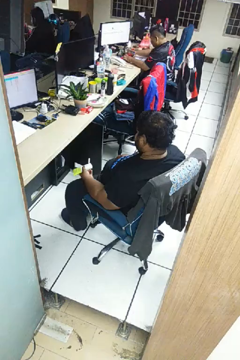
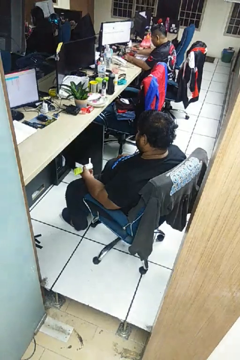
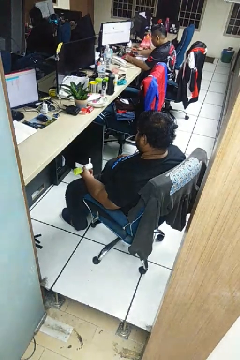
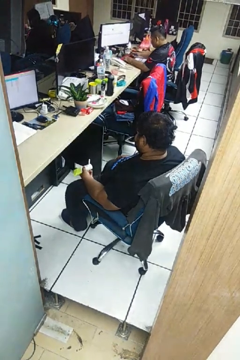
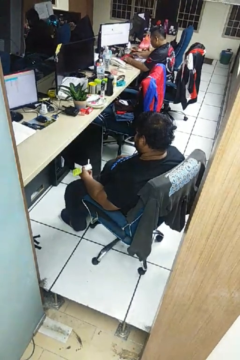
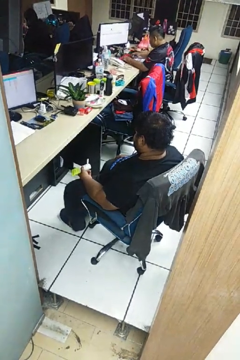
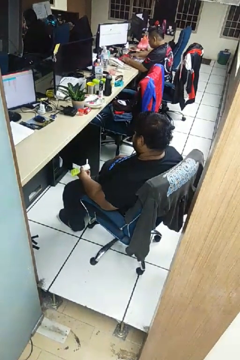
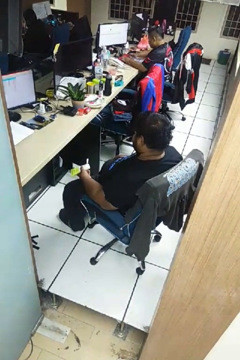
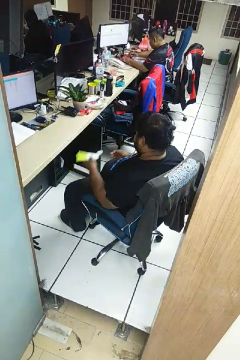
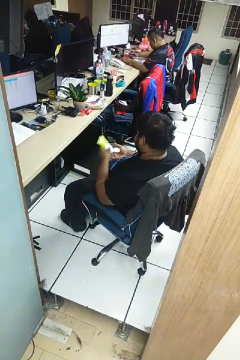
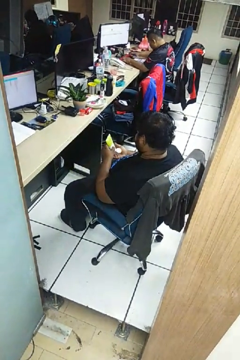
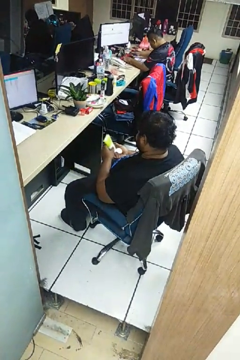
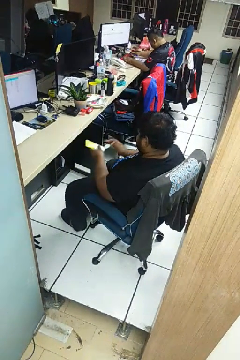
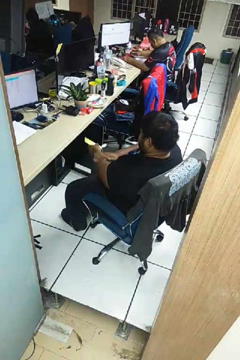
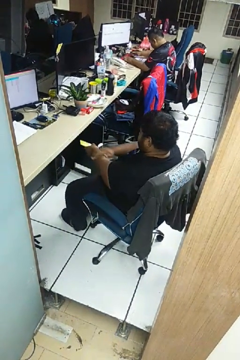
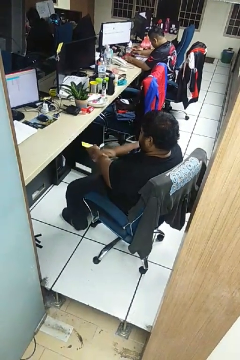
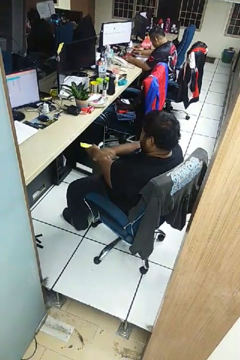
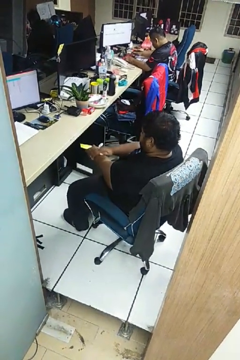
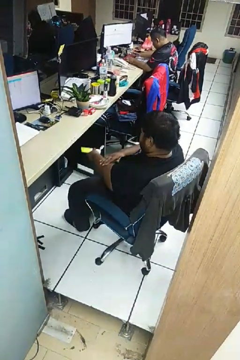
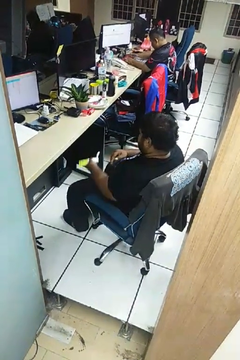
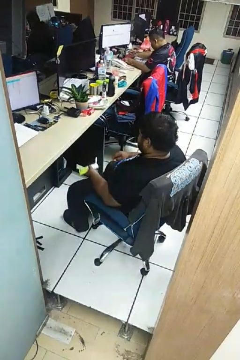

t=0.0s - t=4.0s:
person applies sunscreen

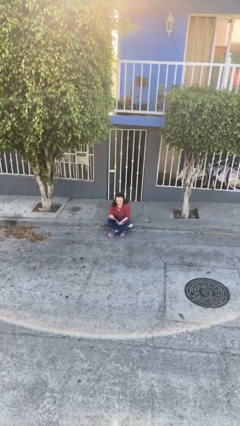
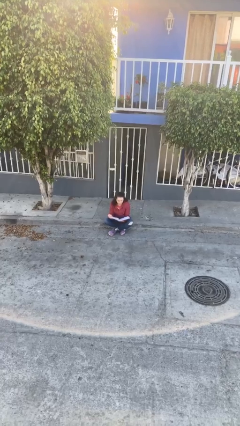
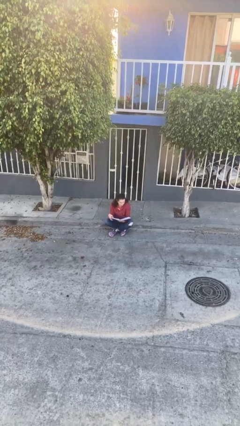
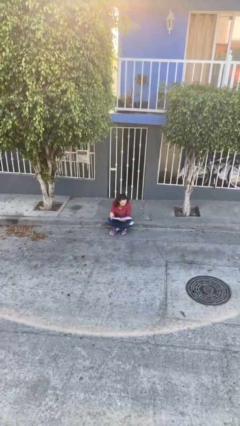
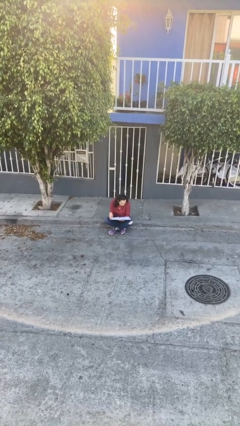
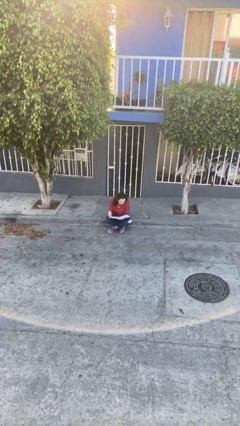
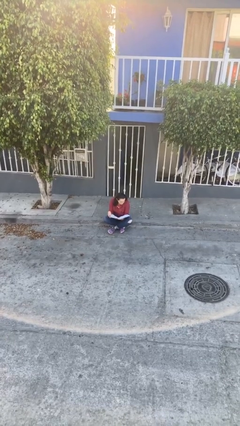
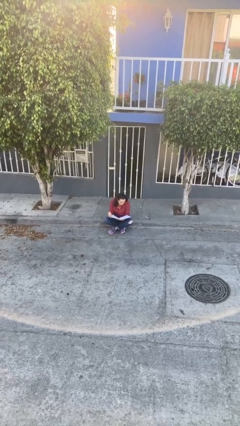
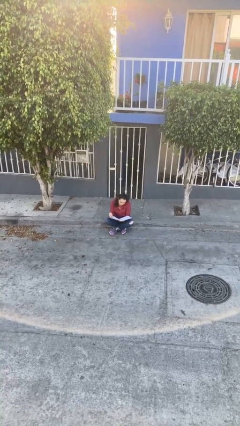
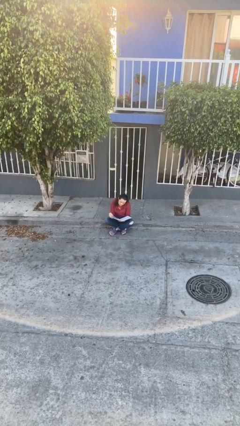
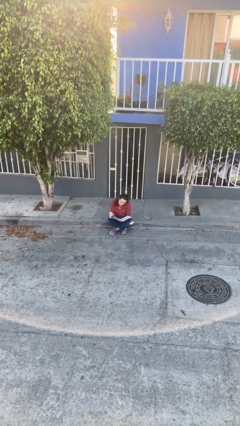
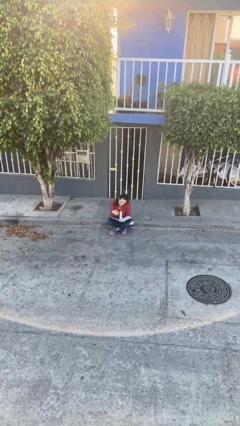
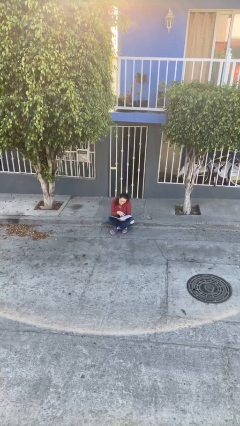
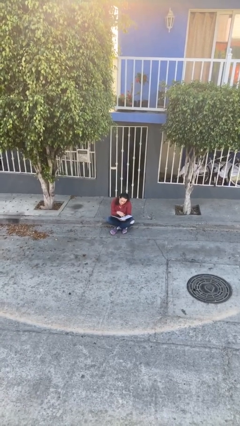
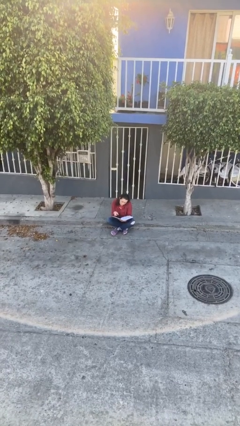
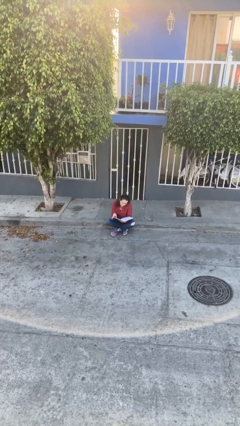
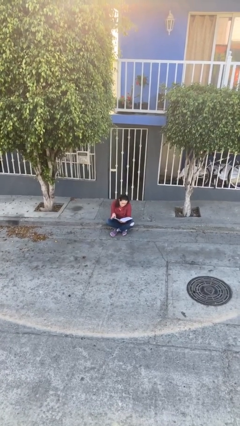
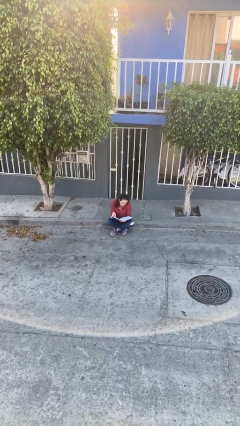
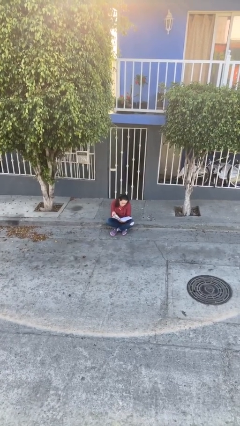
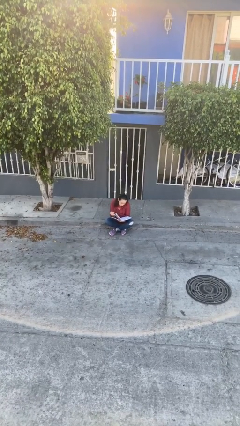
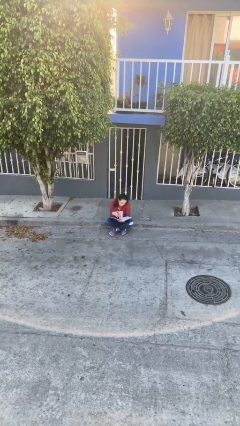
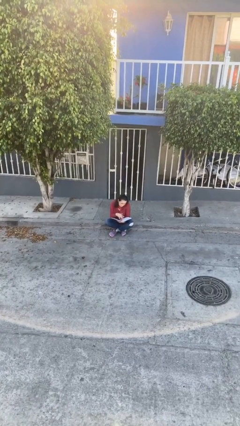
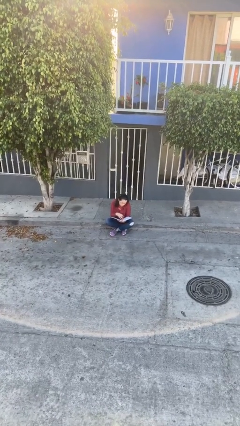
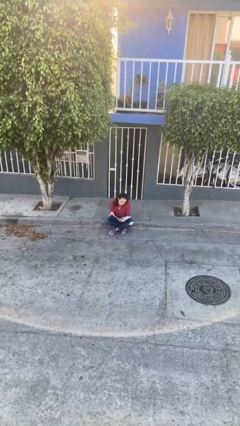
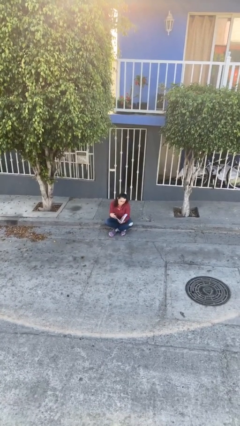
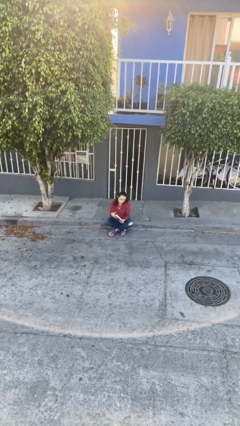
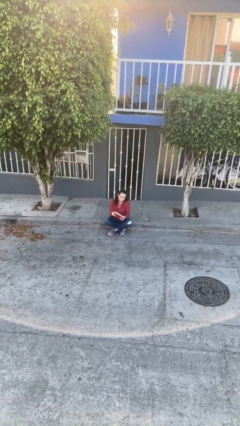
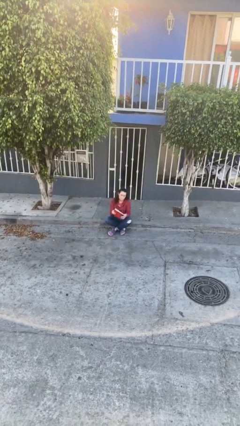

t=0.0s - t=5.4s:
person reads document

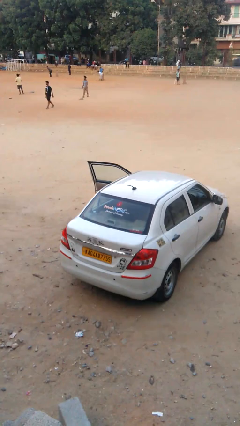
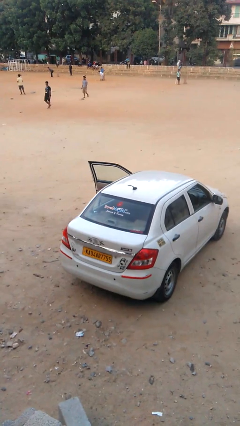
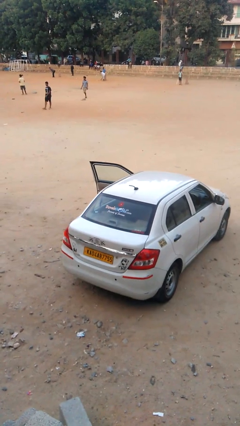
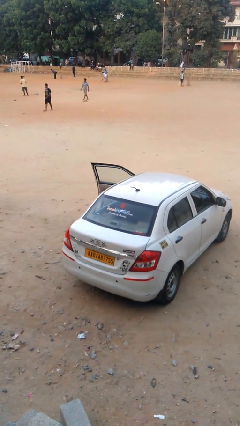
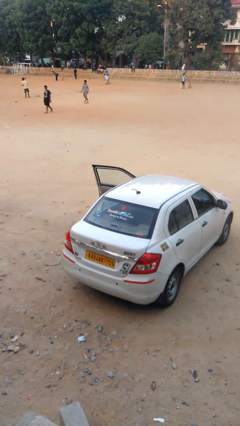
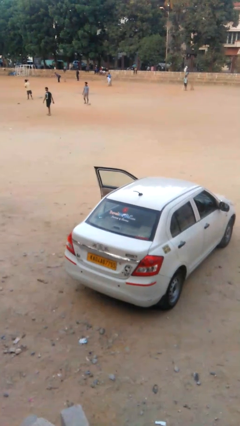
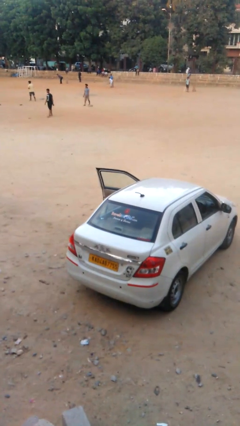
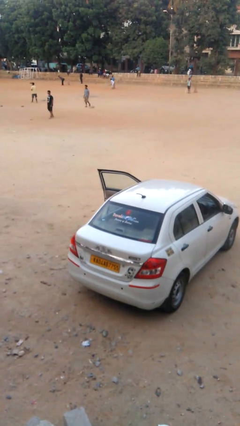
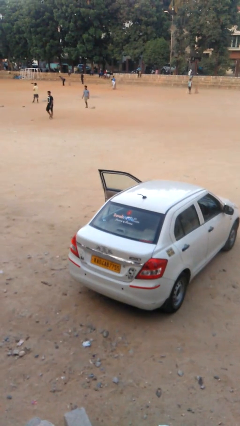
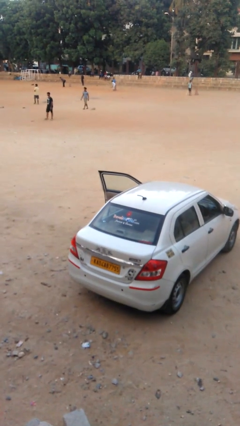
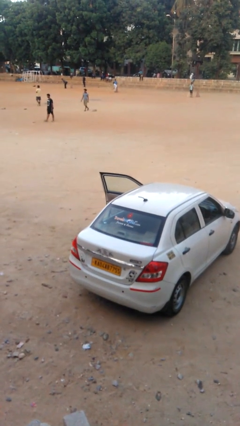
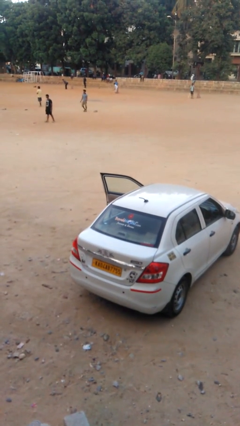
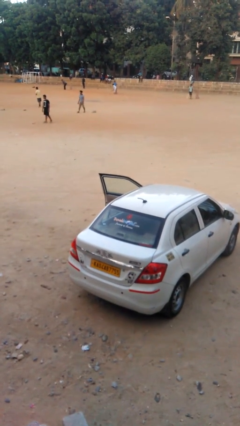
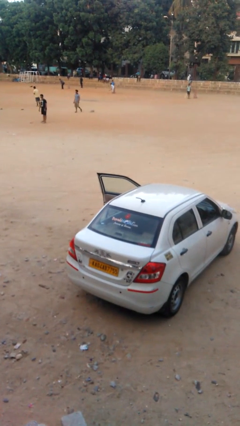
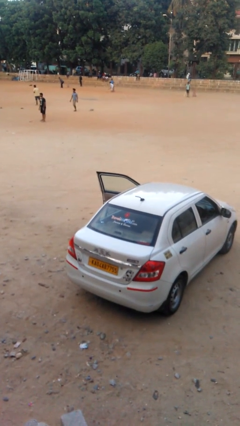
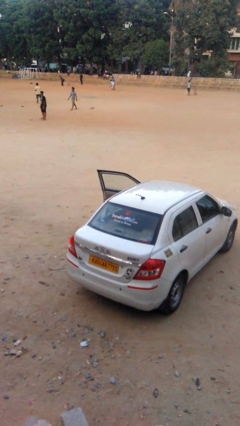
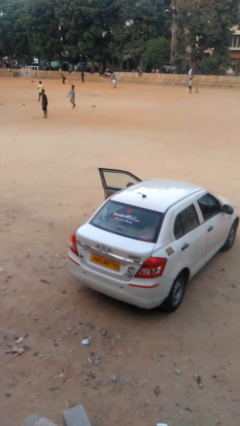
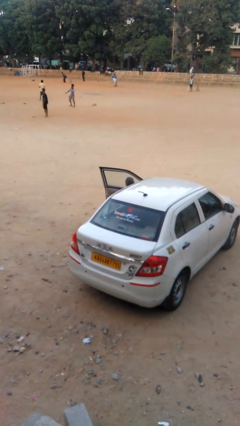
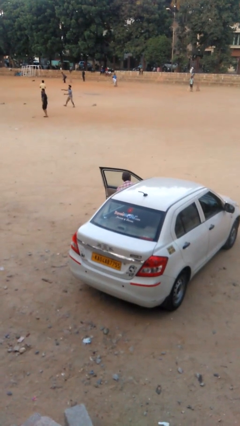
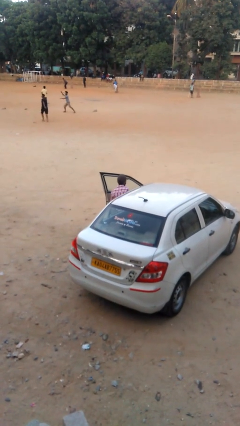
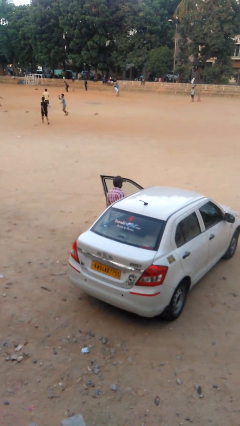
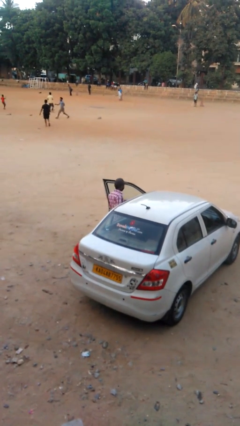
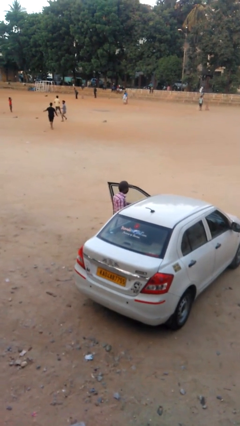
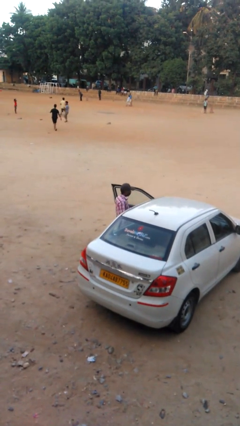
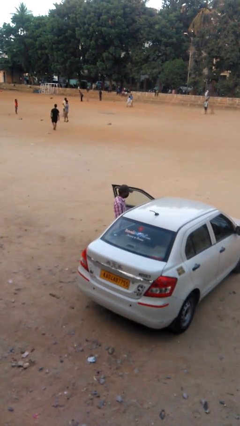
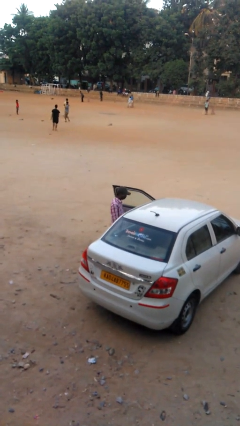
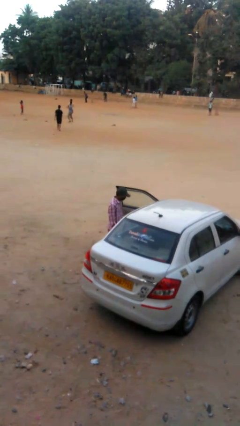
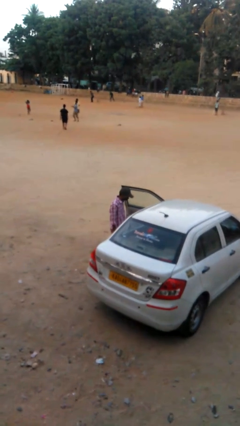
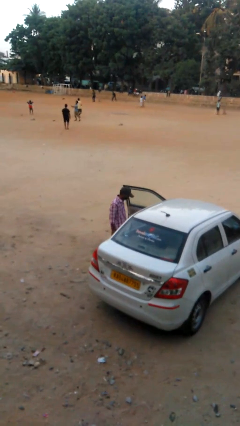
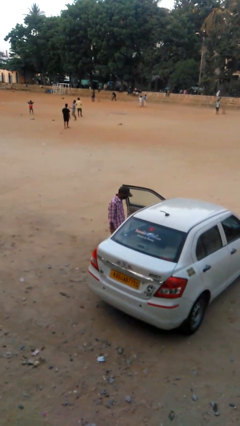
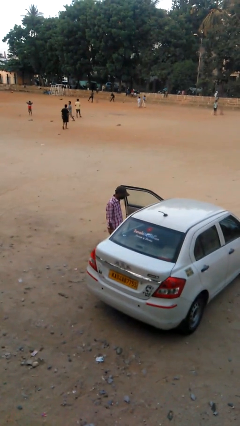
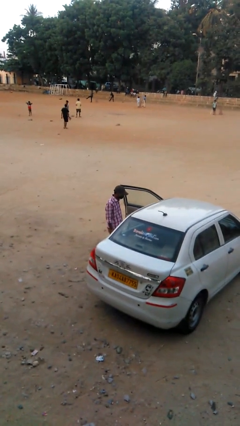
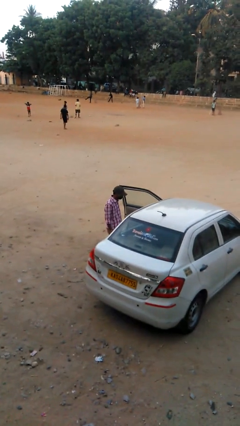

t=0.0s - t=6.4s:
person exits car

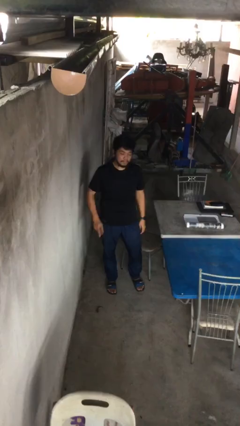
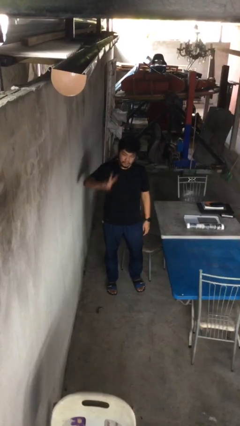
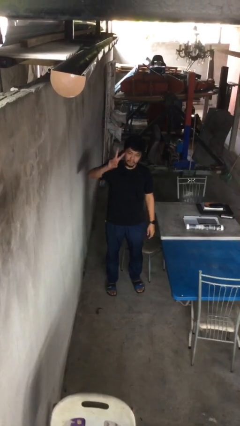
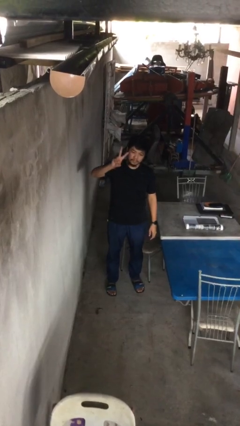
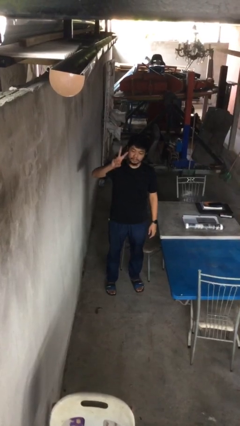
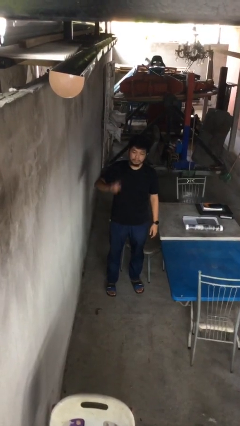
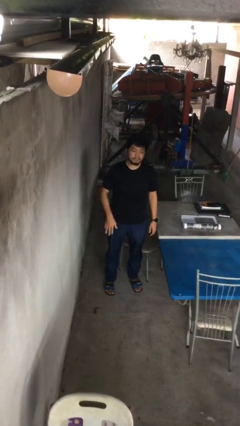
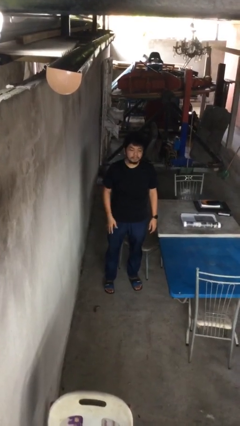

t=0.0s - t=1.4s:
person gestures peace

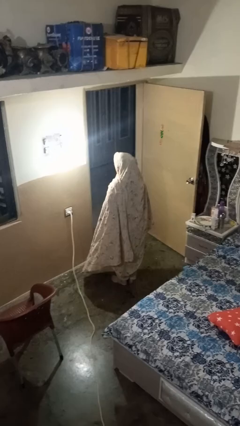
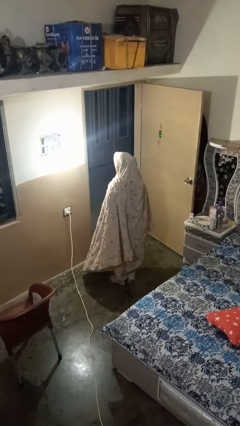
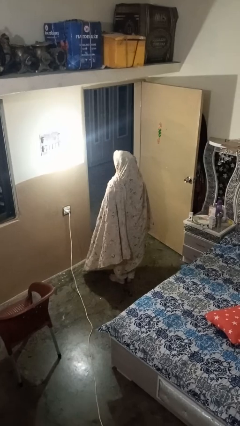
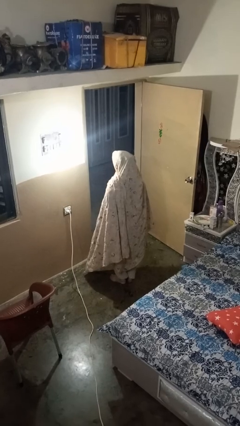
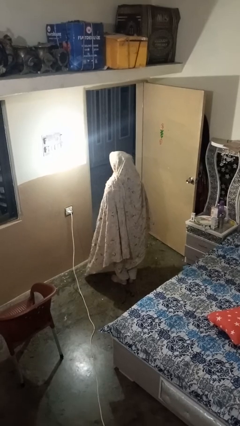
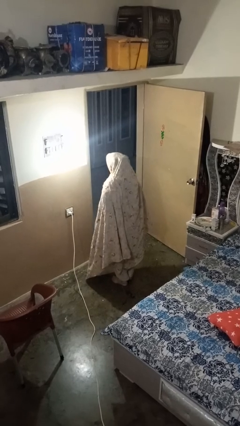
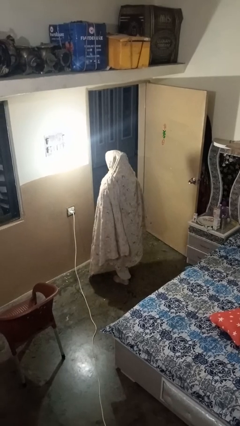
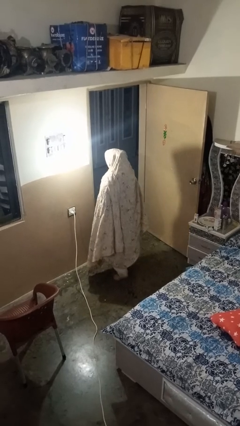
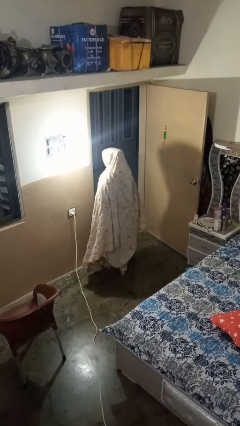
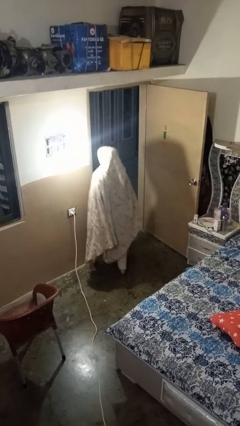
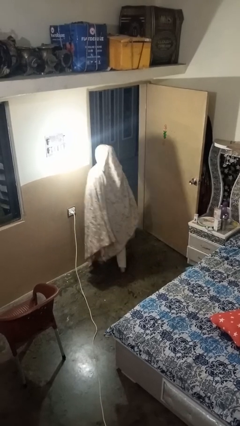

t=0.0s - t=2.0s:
person bumps into wall
